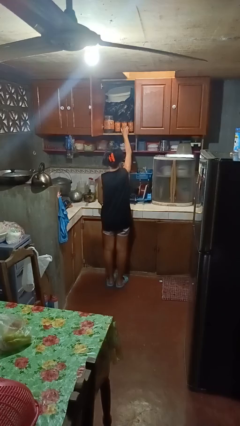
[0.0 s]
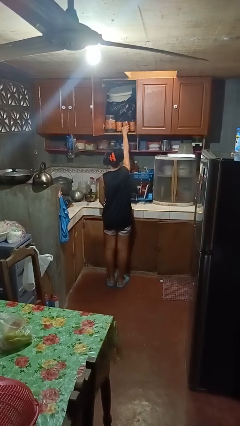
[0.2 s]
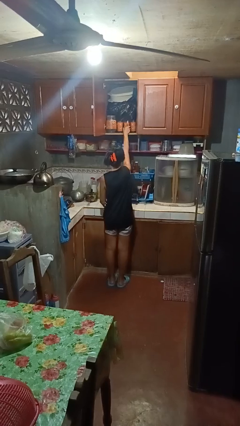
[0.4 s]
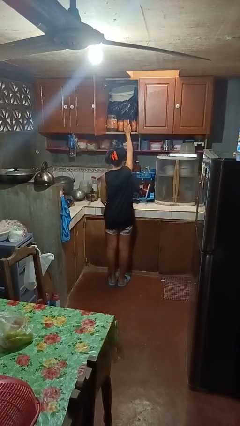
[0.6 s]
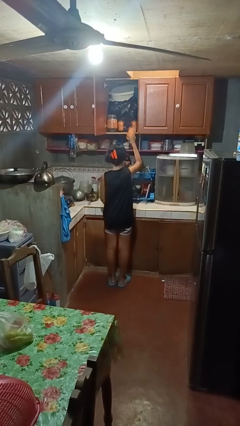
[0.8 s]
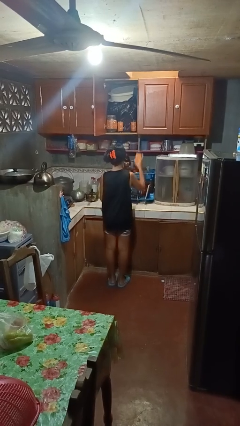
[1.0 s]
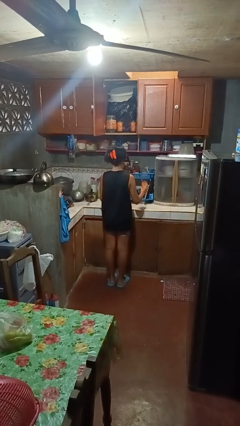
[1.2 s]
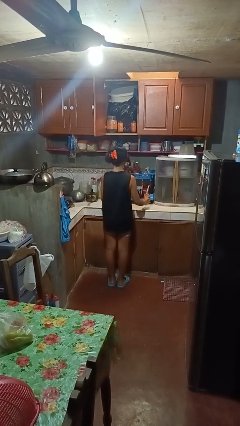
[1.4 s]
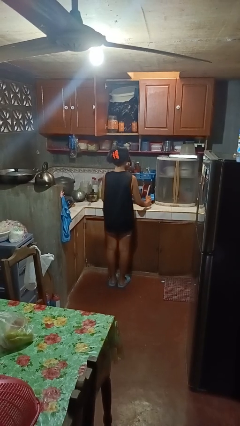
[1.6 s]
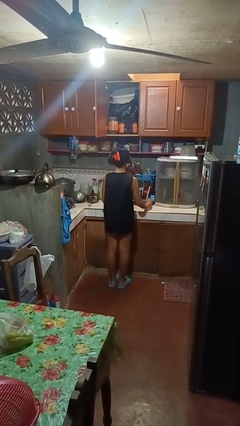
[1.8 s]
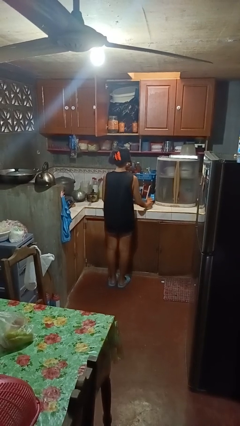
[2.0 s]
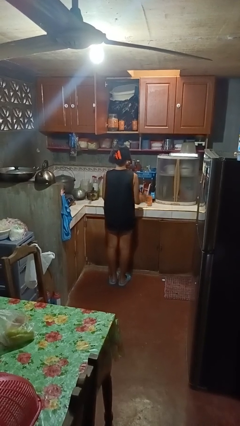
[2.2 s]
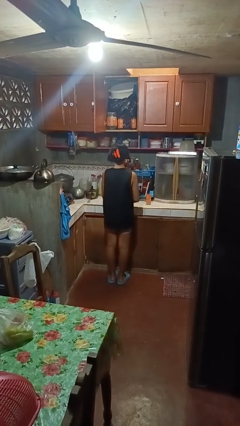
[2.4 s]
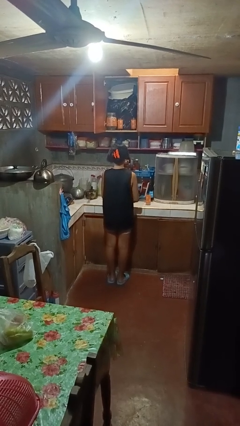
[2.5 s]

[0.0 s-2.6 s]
person takes object from cabinet

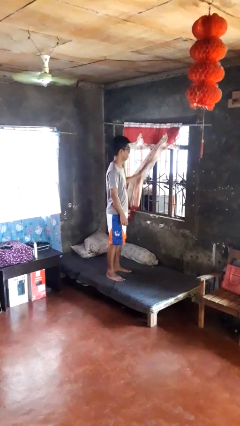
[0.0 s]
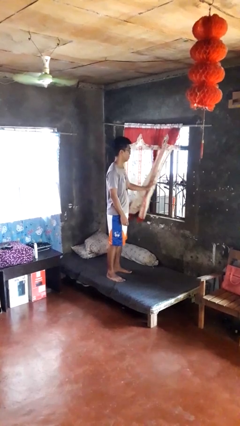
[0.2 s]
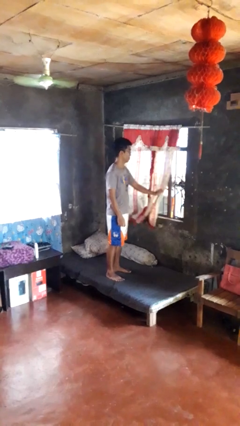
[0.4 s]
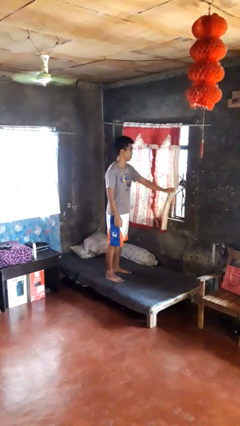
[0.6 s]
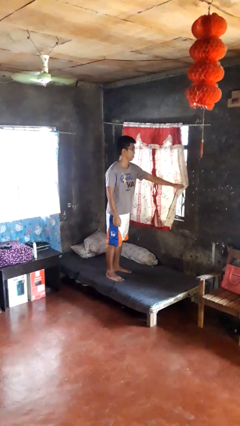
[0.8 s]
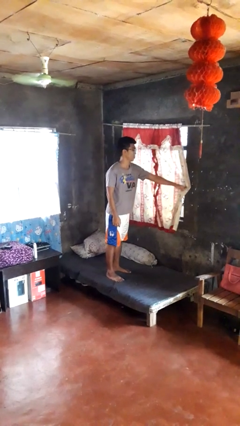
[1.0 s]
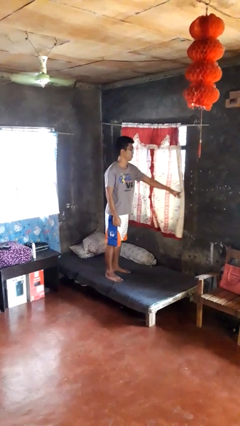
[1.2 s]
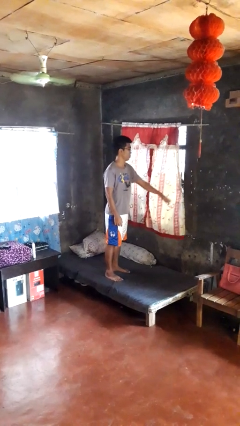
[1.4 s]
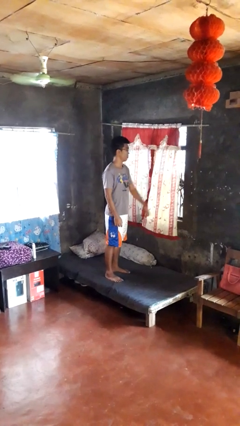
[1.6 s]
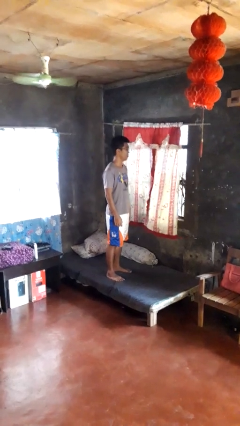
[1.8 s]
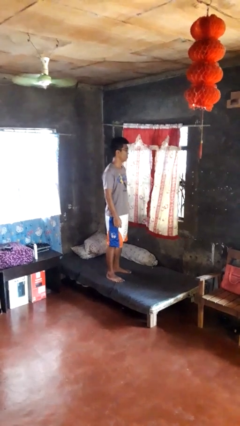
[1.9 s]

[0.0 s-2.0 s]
person closes curtains

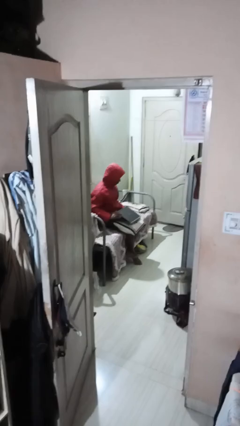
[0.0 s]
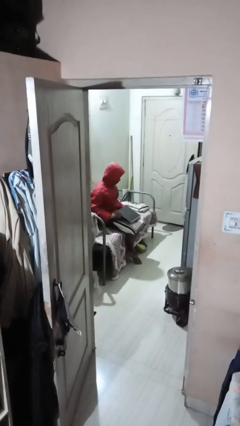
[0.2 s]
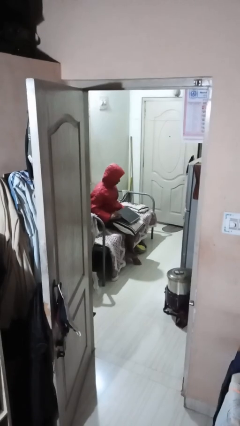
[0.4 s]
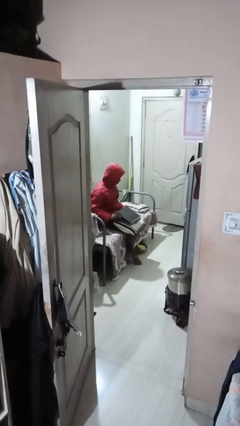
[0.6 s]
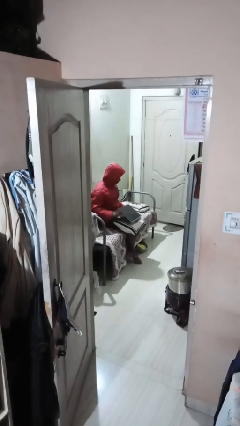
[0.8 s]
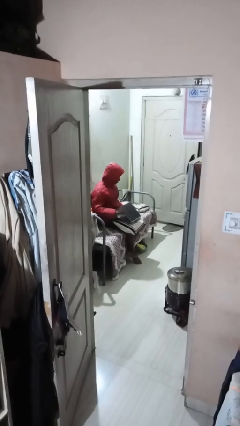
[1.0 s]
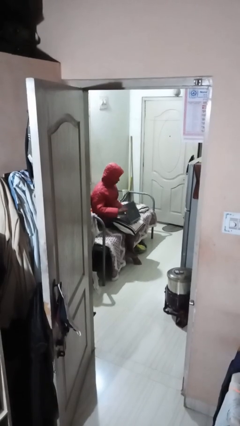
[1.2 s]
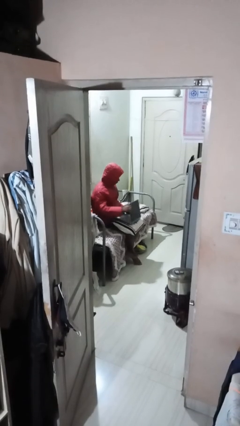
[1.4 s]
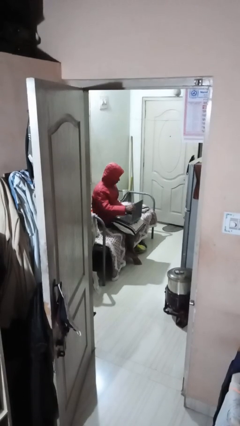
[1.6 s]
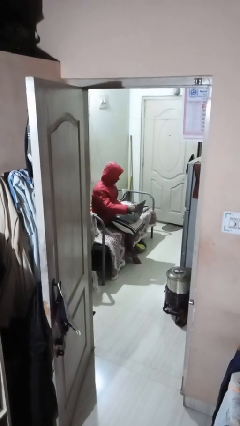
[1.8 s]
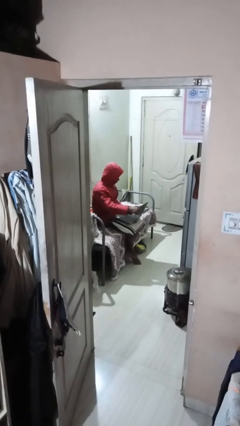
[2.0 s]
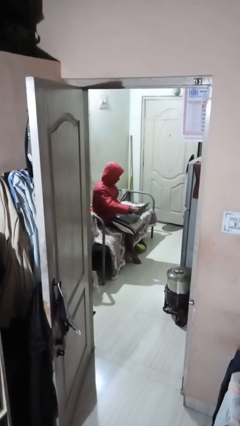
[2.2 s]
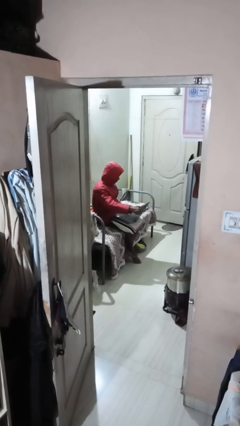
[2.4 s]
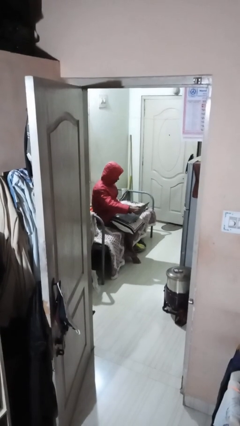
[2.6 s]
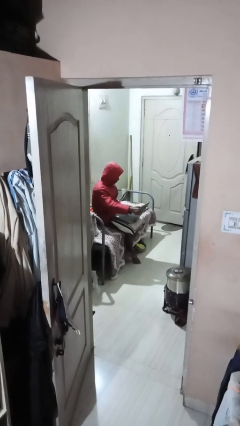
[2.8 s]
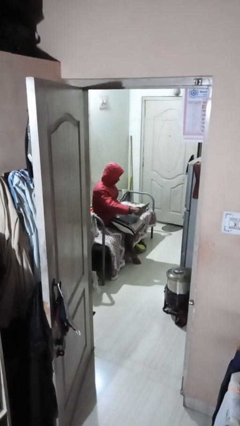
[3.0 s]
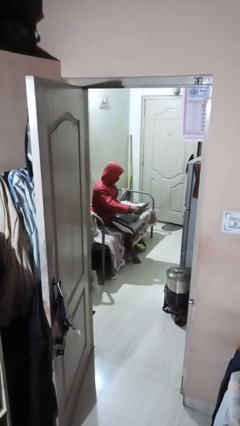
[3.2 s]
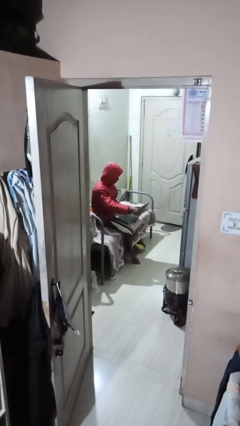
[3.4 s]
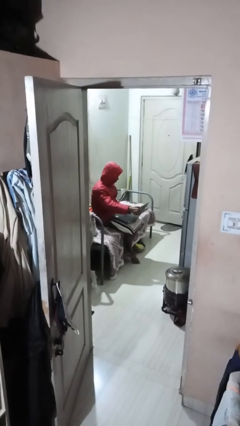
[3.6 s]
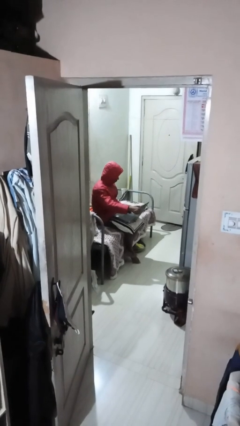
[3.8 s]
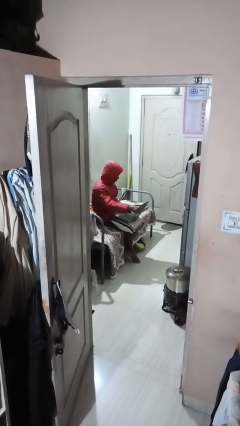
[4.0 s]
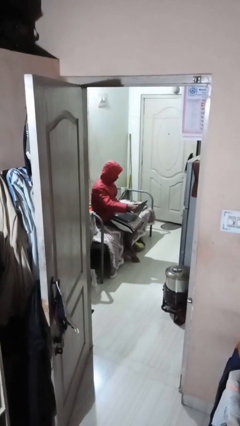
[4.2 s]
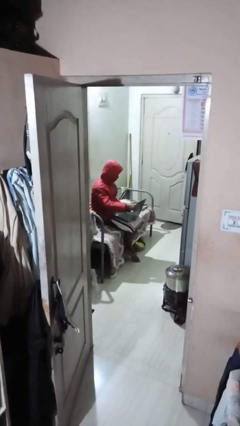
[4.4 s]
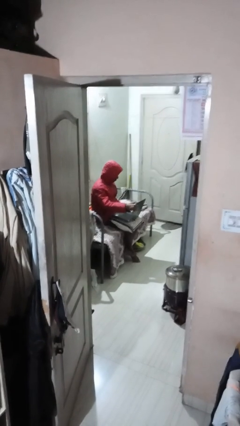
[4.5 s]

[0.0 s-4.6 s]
person interacts with laptop

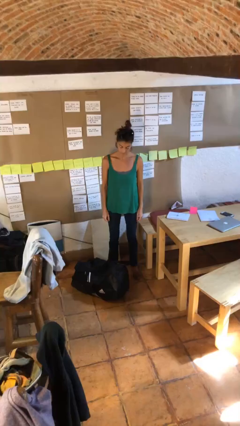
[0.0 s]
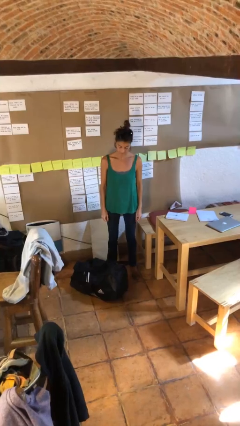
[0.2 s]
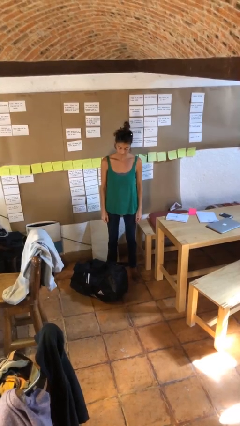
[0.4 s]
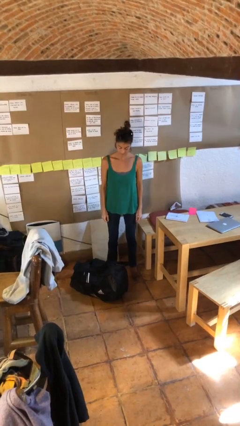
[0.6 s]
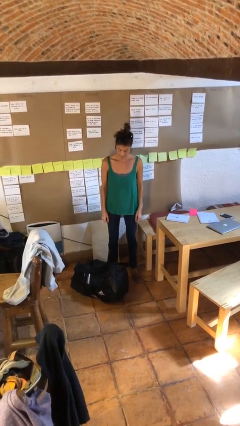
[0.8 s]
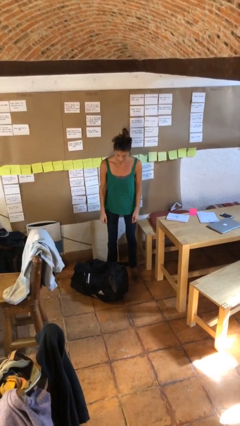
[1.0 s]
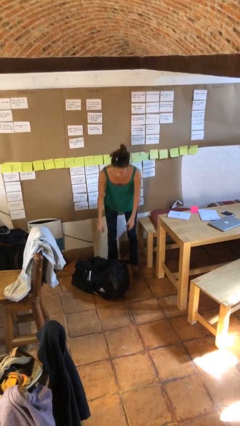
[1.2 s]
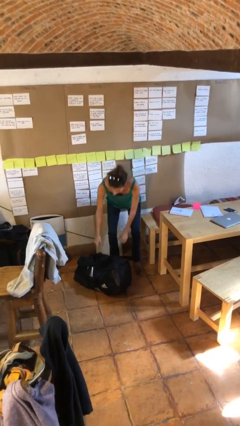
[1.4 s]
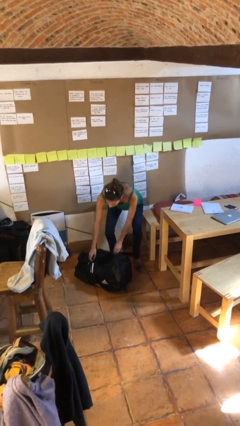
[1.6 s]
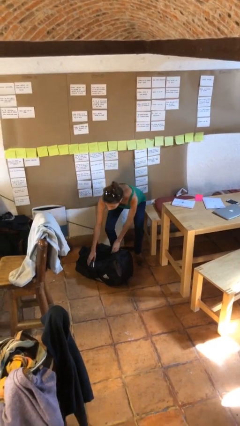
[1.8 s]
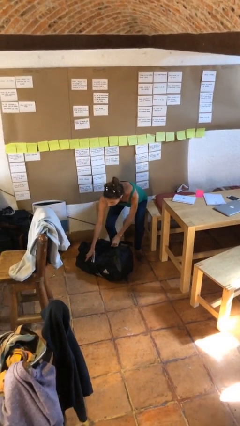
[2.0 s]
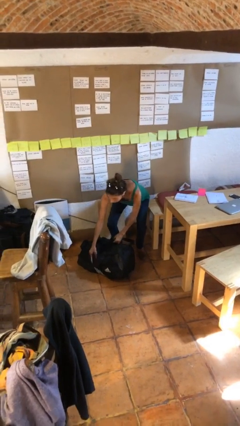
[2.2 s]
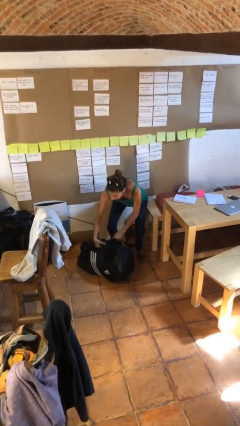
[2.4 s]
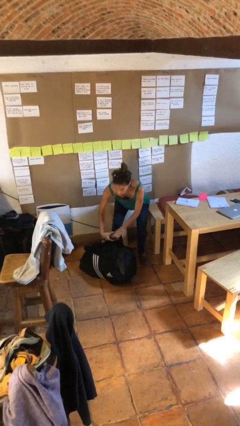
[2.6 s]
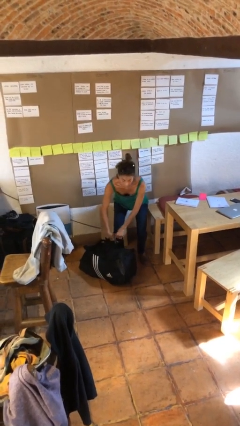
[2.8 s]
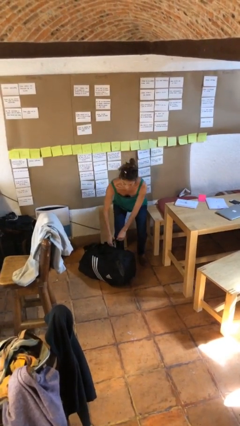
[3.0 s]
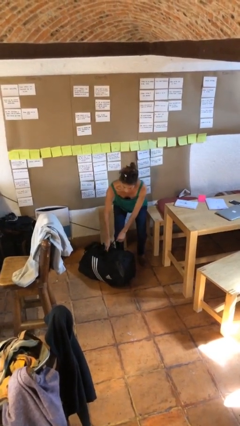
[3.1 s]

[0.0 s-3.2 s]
person picks up object from floor

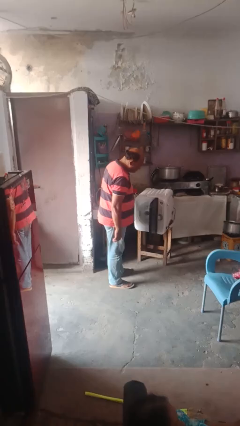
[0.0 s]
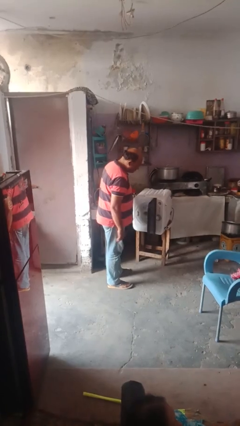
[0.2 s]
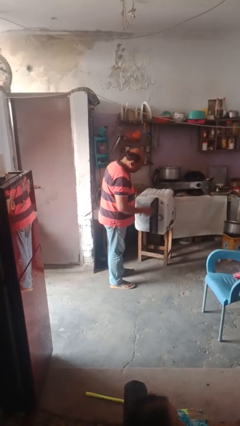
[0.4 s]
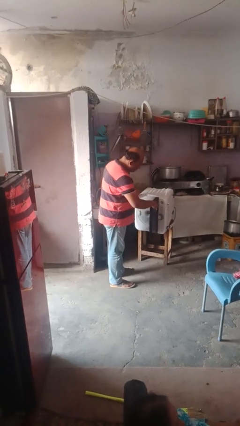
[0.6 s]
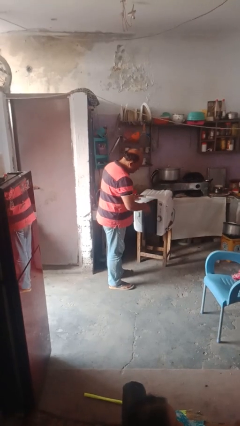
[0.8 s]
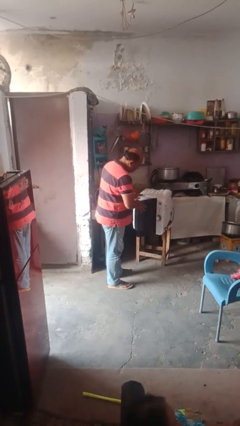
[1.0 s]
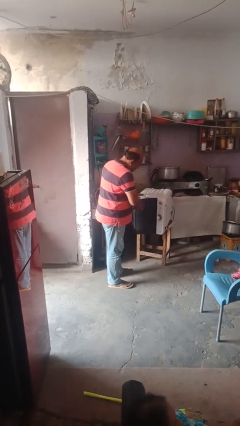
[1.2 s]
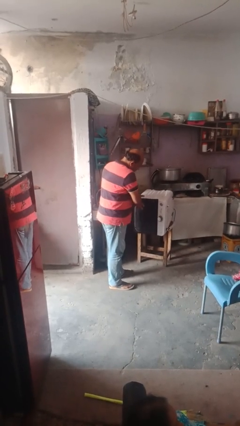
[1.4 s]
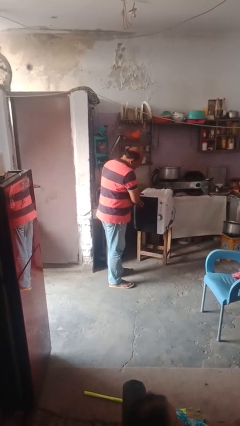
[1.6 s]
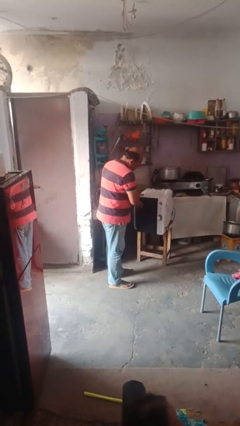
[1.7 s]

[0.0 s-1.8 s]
person closes dishwasher

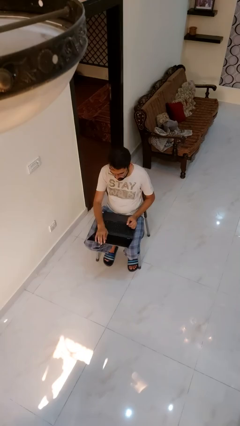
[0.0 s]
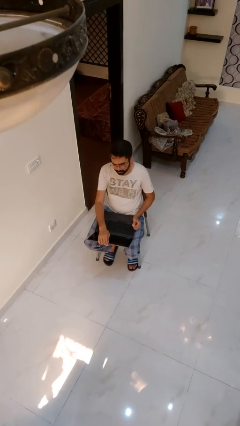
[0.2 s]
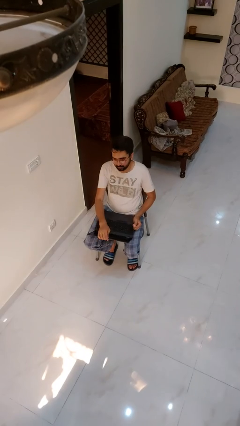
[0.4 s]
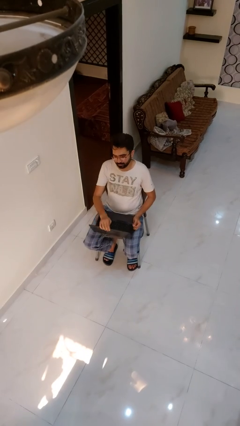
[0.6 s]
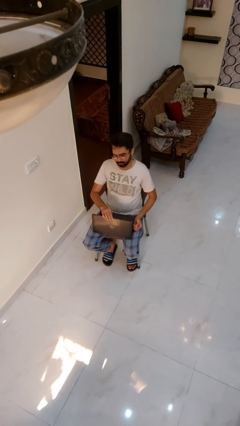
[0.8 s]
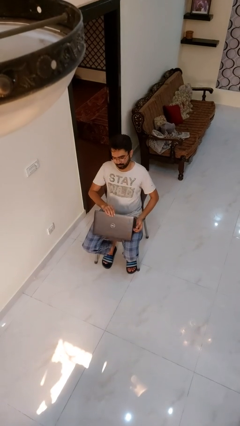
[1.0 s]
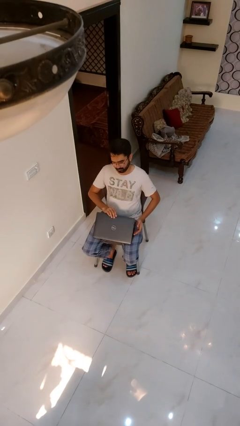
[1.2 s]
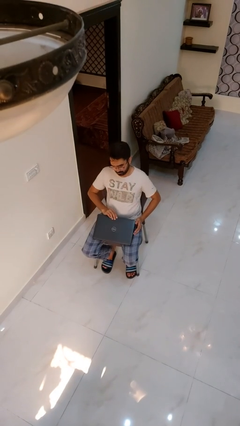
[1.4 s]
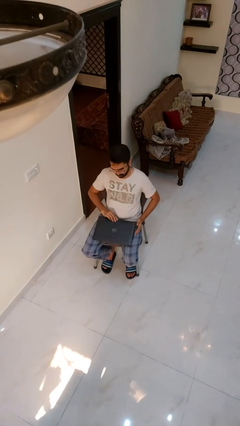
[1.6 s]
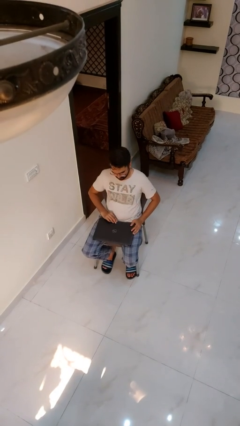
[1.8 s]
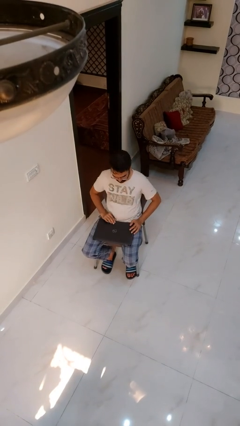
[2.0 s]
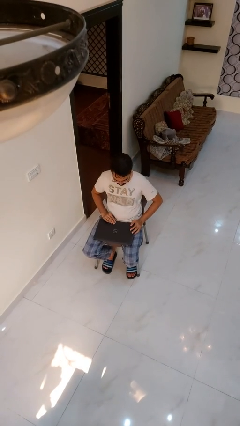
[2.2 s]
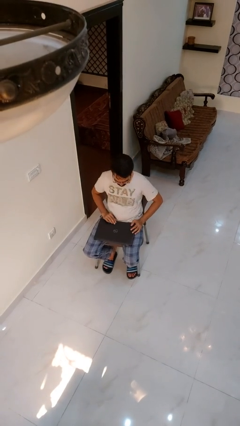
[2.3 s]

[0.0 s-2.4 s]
person closes laptop

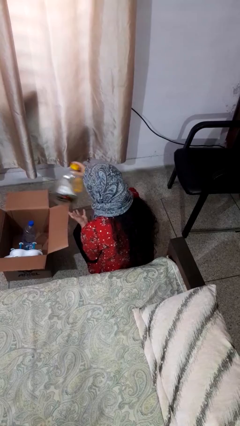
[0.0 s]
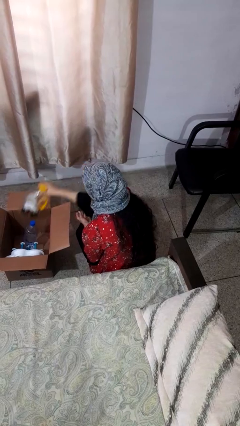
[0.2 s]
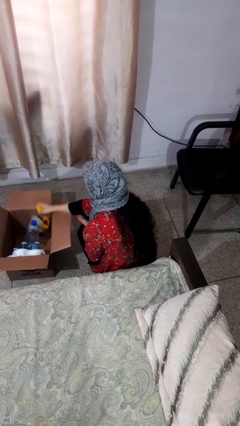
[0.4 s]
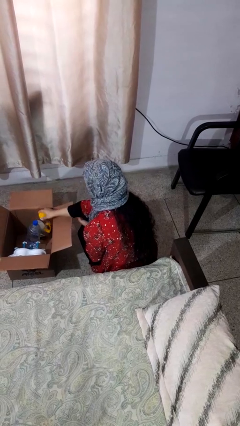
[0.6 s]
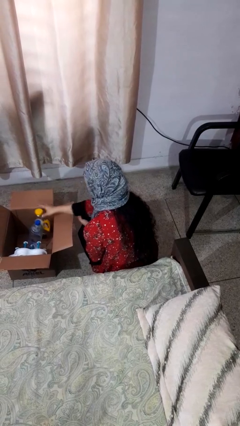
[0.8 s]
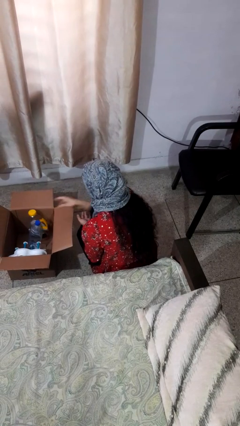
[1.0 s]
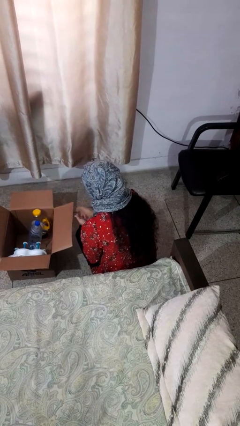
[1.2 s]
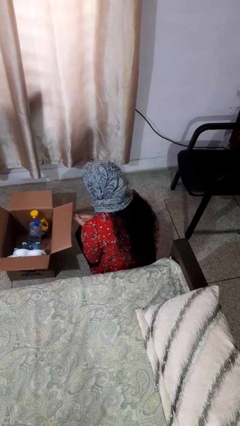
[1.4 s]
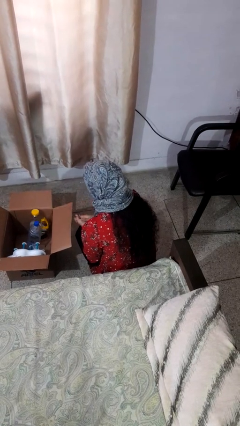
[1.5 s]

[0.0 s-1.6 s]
person puts object into box
